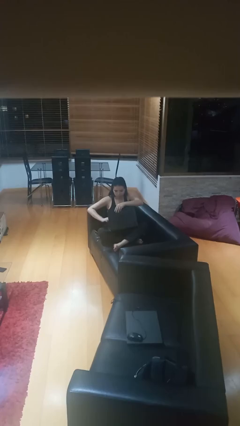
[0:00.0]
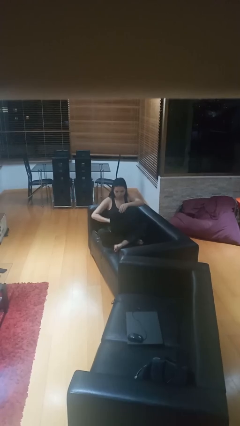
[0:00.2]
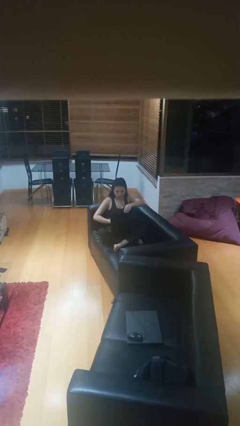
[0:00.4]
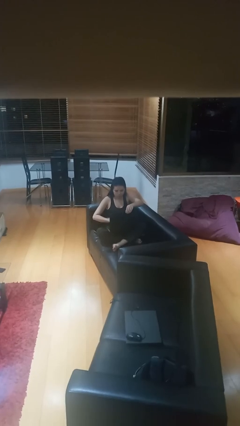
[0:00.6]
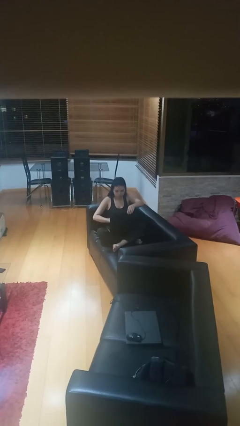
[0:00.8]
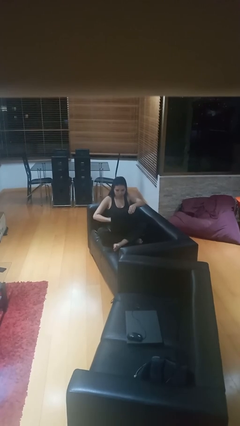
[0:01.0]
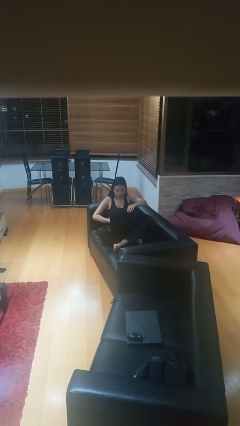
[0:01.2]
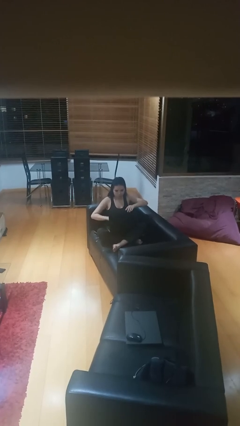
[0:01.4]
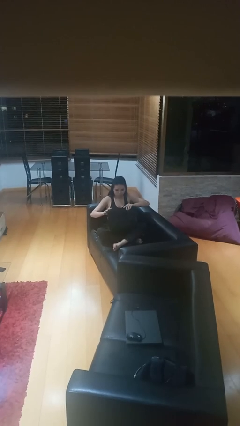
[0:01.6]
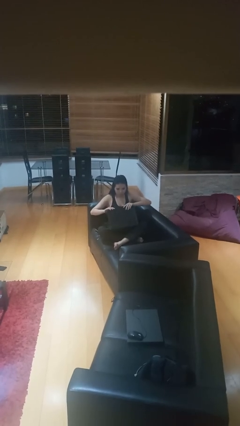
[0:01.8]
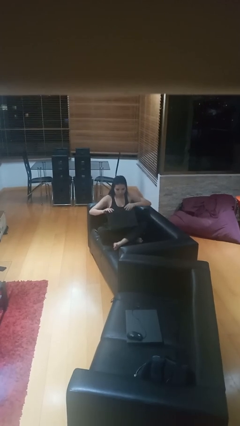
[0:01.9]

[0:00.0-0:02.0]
person interacts with laptop

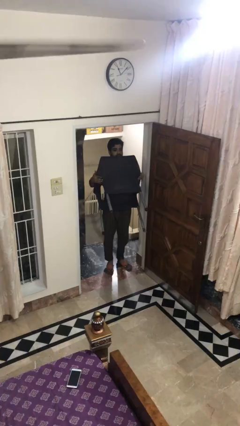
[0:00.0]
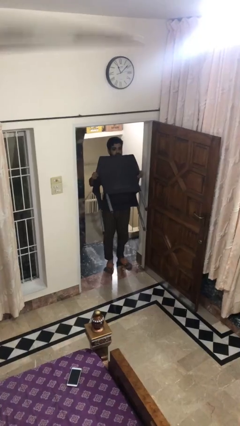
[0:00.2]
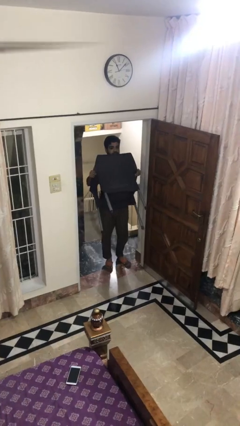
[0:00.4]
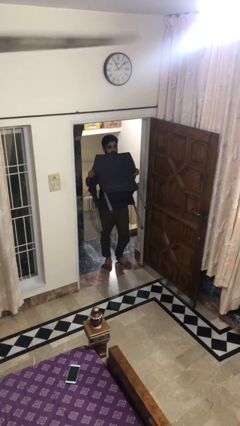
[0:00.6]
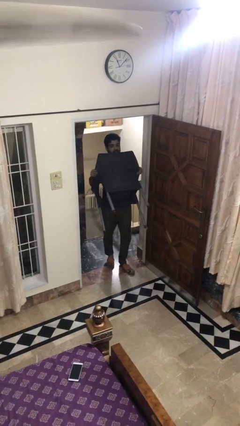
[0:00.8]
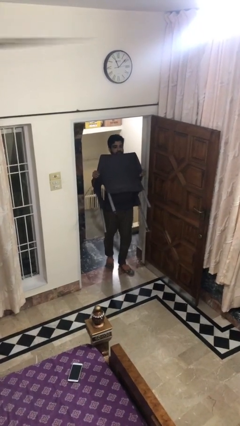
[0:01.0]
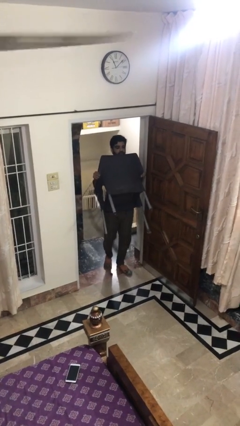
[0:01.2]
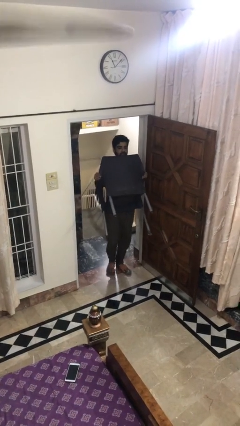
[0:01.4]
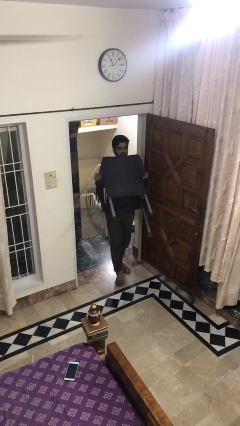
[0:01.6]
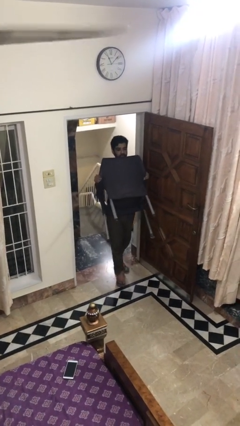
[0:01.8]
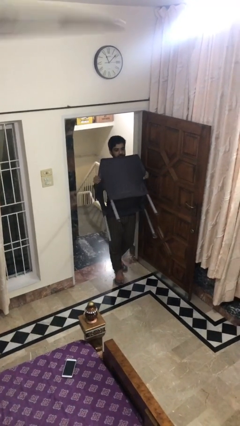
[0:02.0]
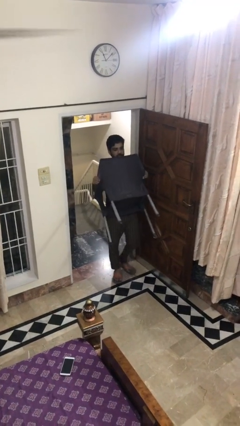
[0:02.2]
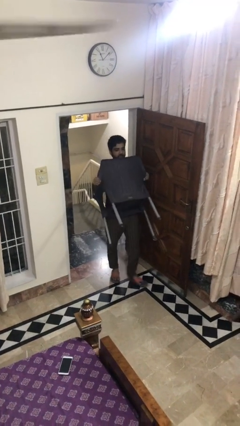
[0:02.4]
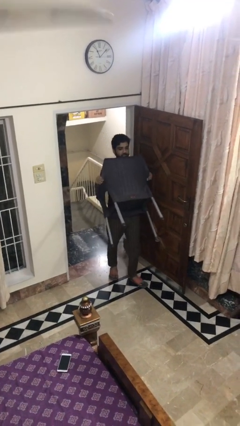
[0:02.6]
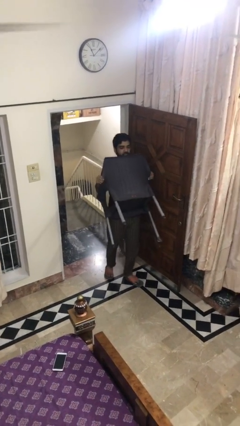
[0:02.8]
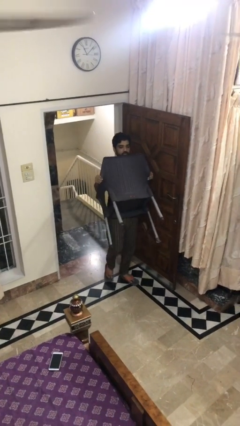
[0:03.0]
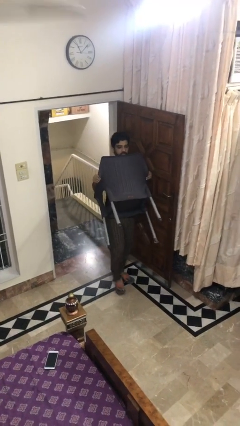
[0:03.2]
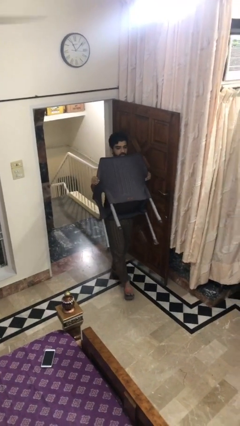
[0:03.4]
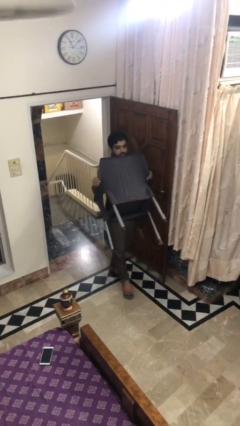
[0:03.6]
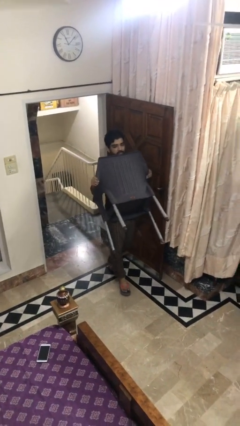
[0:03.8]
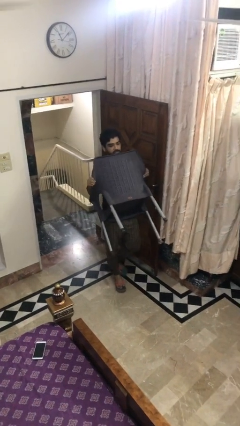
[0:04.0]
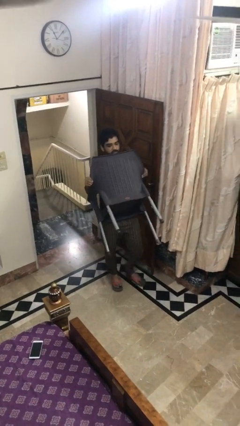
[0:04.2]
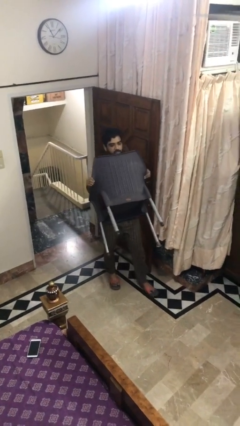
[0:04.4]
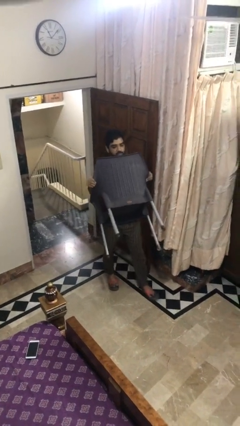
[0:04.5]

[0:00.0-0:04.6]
person carries heavy object

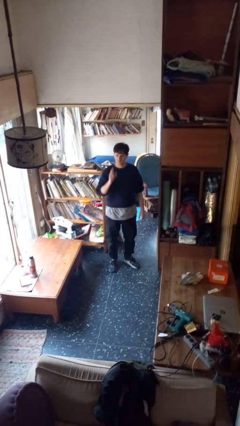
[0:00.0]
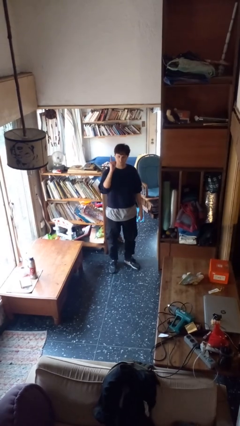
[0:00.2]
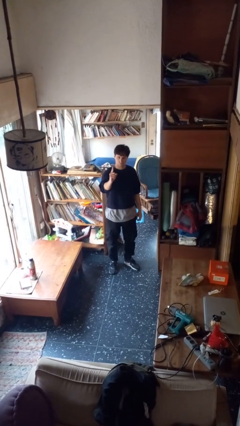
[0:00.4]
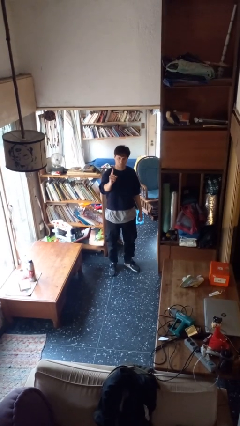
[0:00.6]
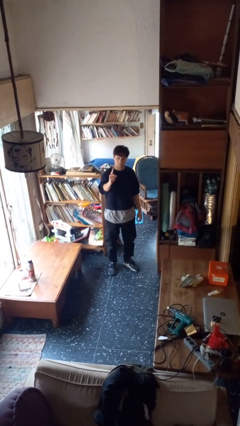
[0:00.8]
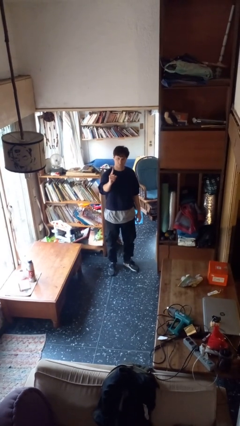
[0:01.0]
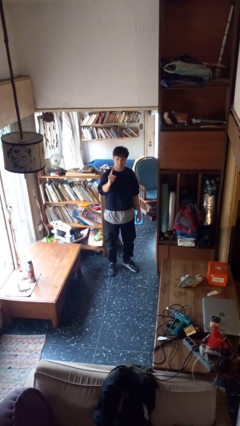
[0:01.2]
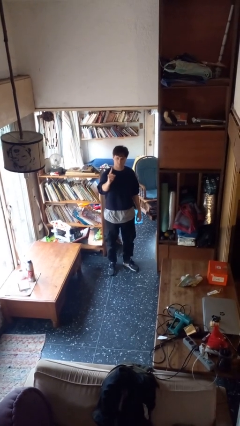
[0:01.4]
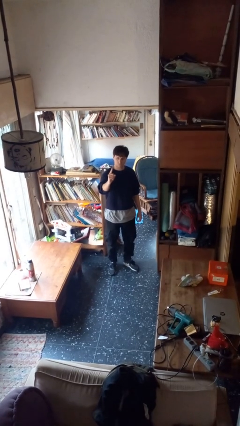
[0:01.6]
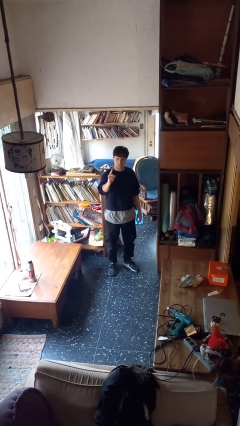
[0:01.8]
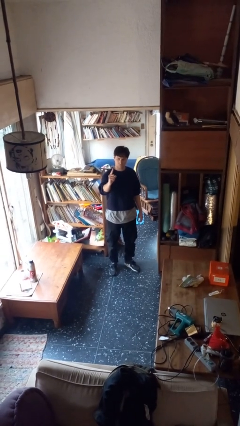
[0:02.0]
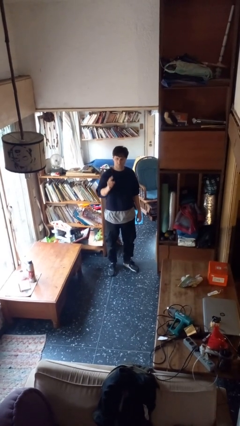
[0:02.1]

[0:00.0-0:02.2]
person gestures number one

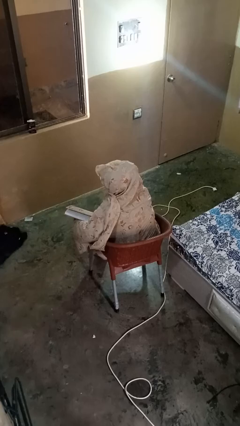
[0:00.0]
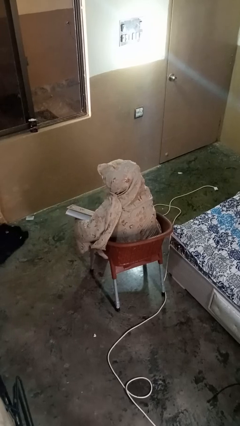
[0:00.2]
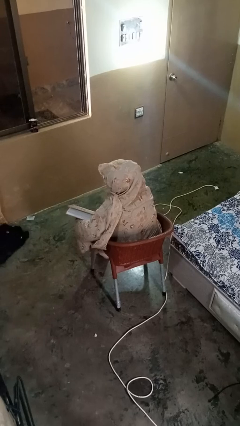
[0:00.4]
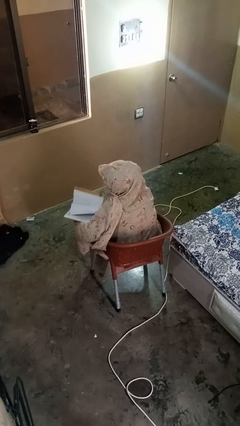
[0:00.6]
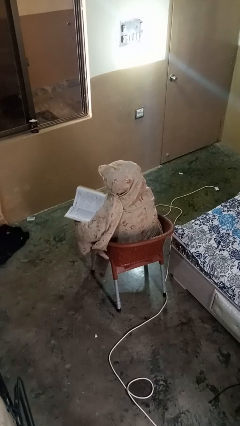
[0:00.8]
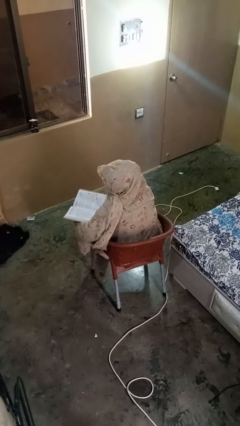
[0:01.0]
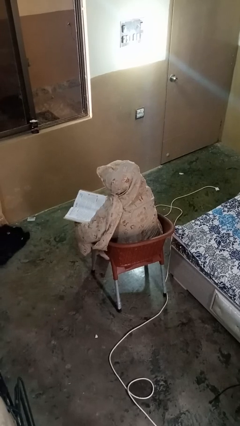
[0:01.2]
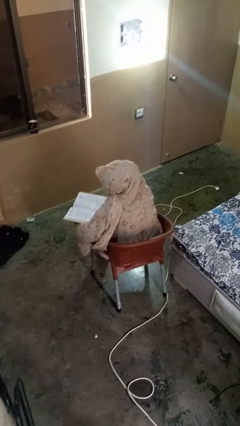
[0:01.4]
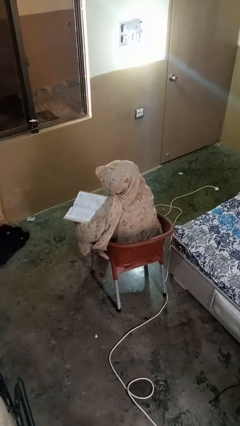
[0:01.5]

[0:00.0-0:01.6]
person reads book

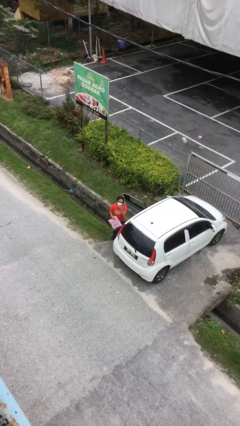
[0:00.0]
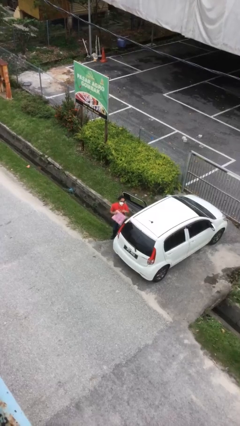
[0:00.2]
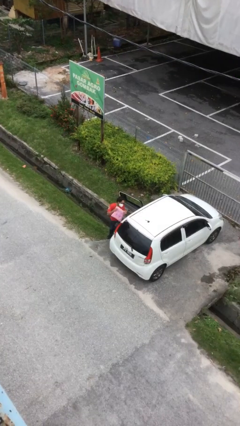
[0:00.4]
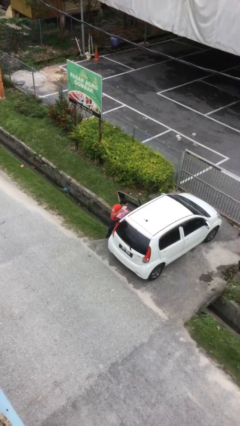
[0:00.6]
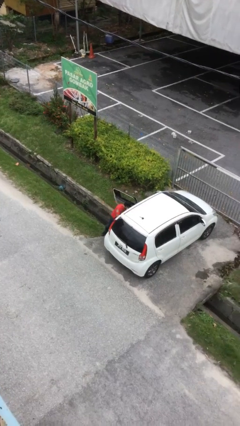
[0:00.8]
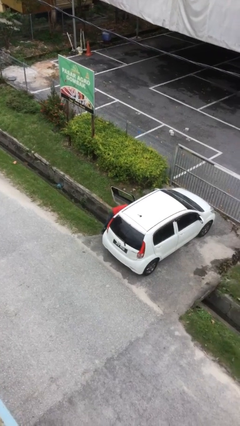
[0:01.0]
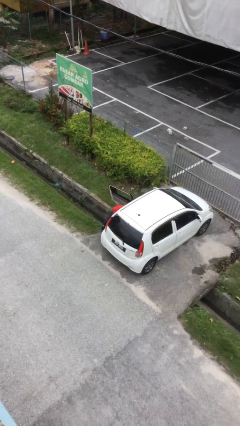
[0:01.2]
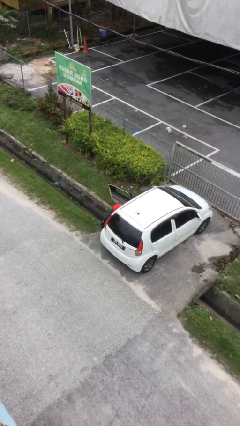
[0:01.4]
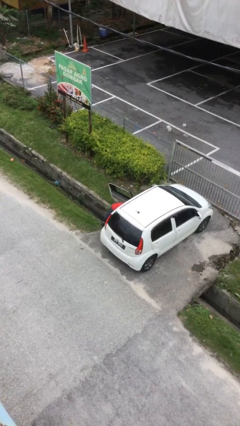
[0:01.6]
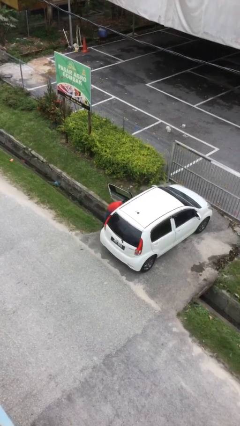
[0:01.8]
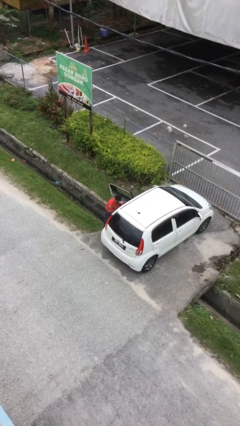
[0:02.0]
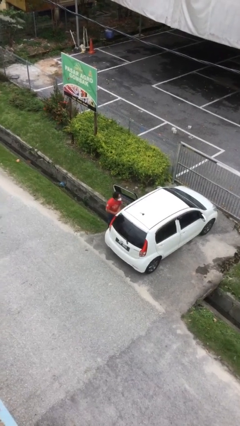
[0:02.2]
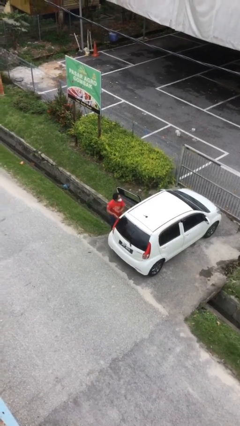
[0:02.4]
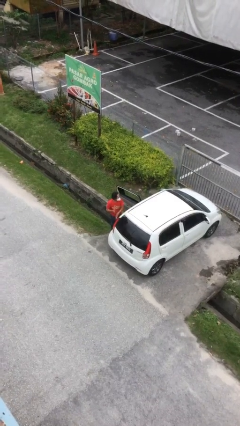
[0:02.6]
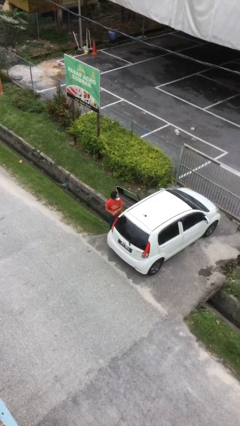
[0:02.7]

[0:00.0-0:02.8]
person loads car

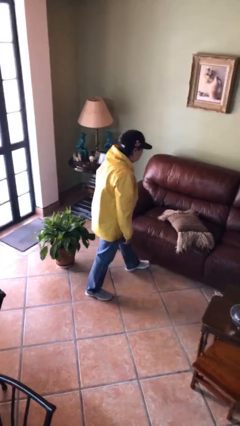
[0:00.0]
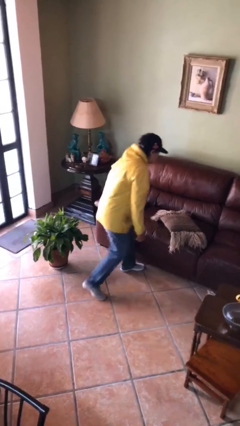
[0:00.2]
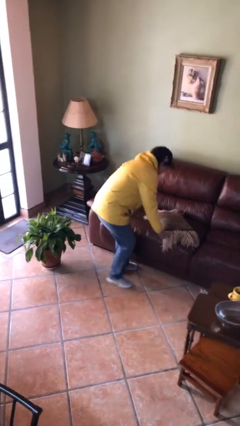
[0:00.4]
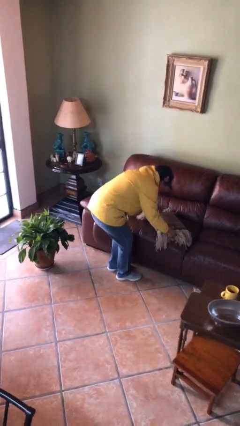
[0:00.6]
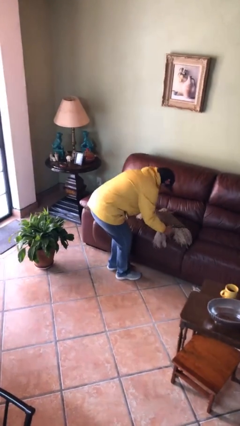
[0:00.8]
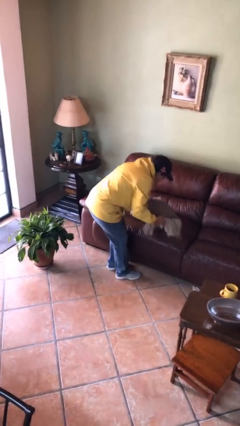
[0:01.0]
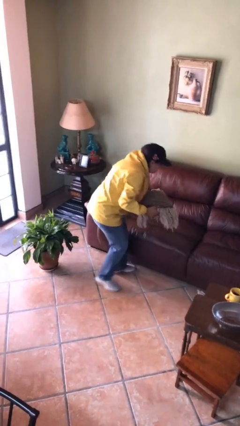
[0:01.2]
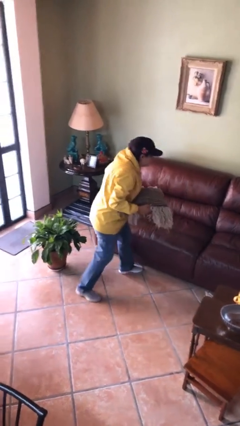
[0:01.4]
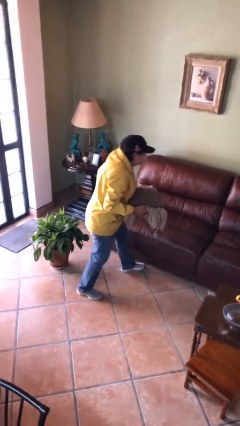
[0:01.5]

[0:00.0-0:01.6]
person picks up object from couch

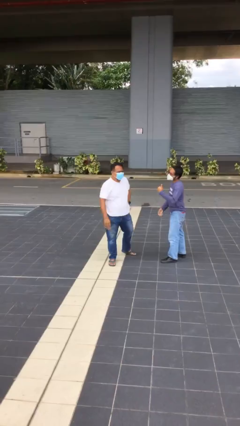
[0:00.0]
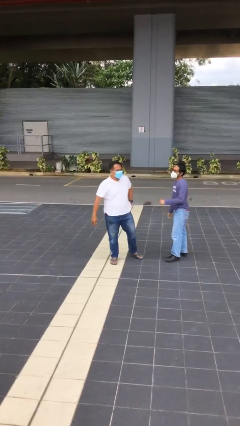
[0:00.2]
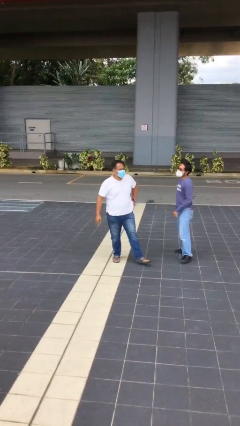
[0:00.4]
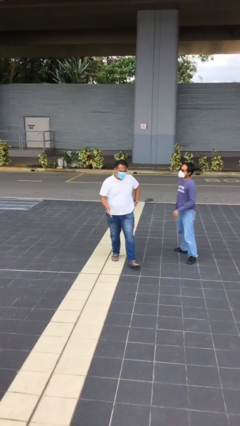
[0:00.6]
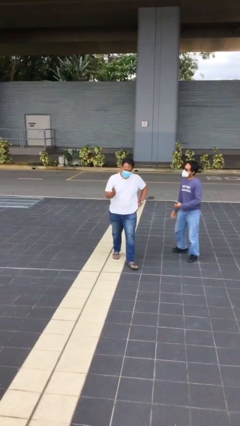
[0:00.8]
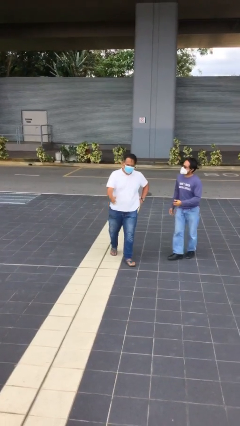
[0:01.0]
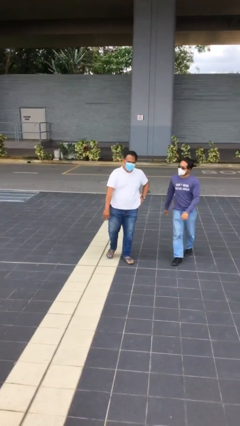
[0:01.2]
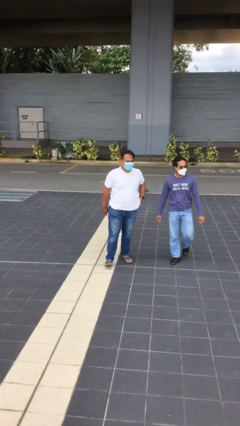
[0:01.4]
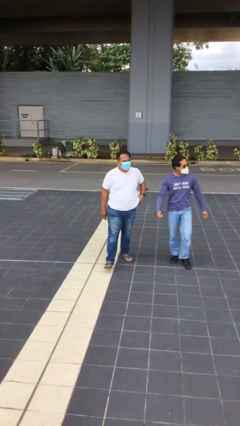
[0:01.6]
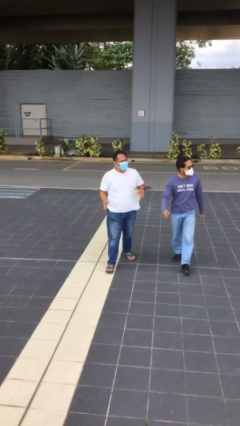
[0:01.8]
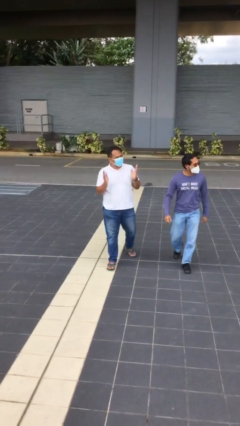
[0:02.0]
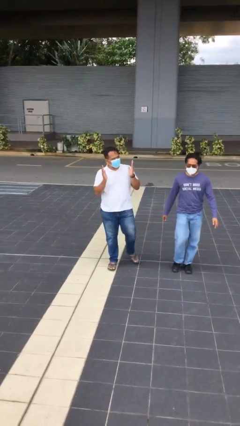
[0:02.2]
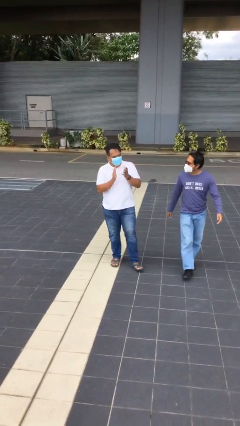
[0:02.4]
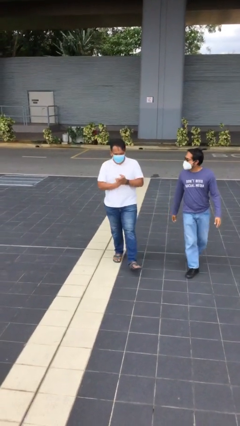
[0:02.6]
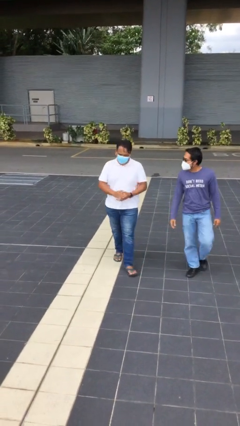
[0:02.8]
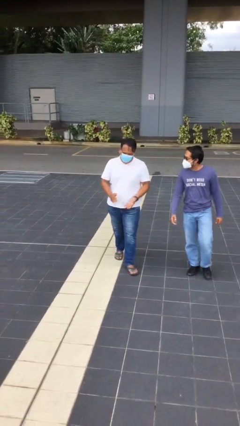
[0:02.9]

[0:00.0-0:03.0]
person talks to person
